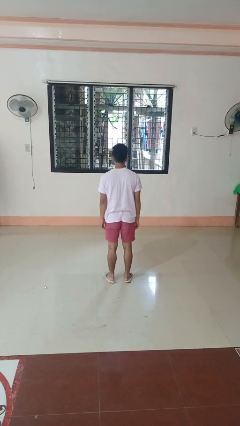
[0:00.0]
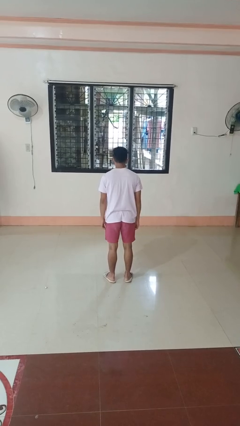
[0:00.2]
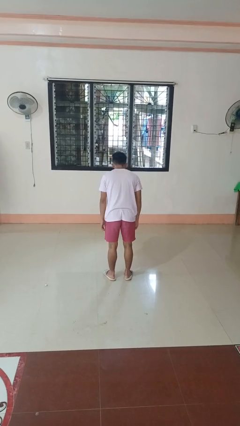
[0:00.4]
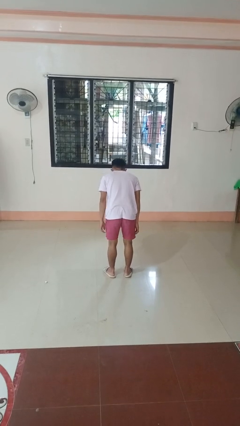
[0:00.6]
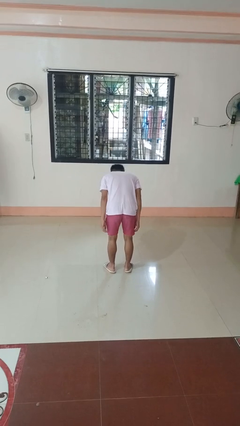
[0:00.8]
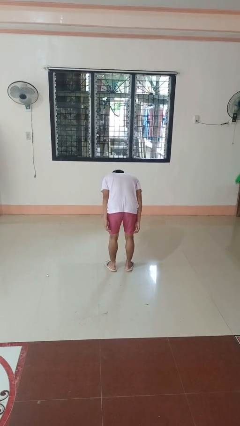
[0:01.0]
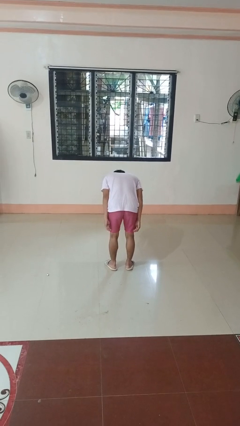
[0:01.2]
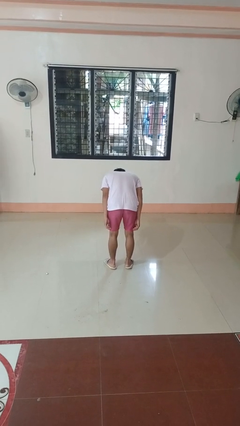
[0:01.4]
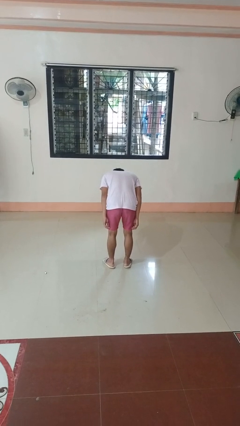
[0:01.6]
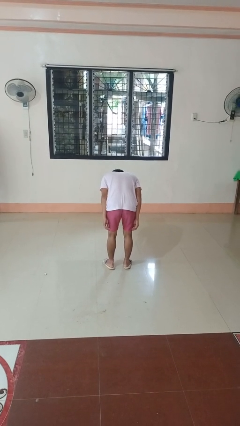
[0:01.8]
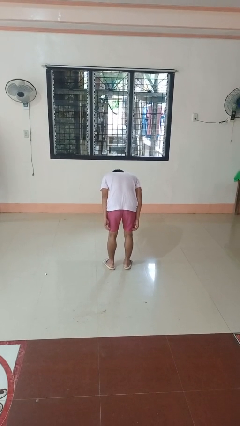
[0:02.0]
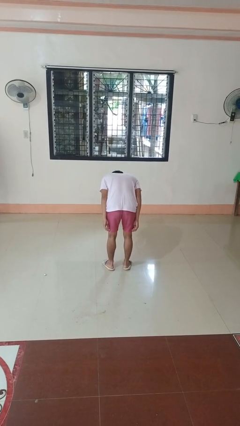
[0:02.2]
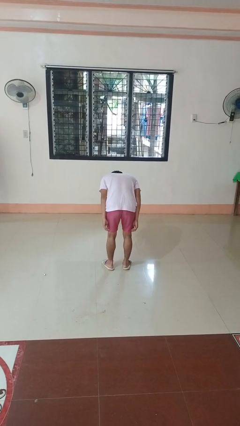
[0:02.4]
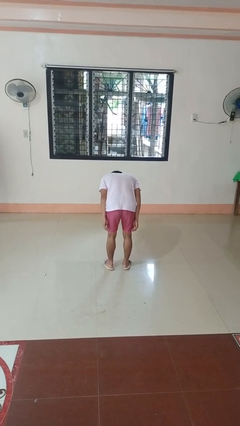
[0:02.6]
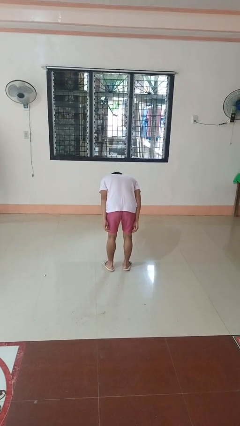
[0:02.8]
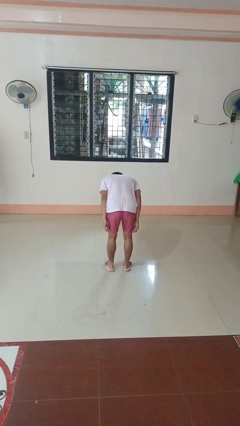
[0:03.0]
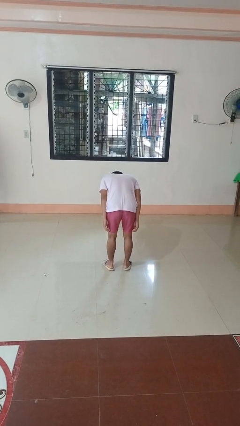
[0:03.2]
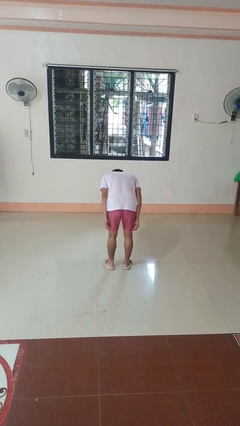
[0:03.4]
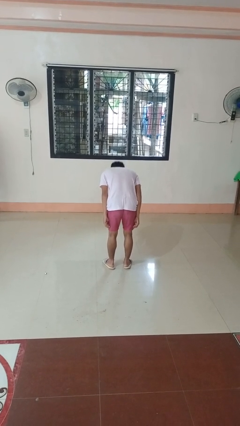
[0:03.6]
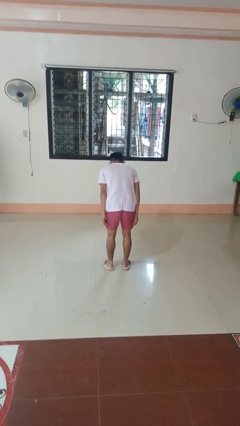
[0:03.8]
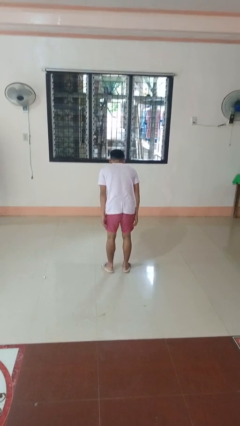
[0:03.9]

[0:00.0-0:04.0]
person bows

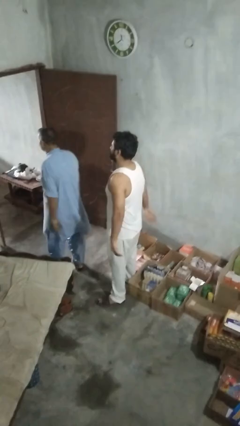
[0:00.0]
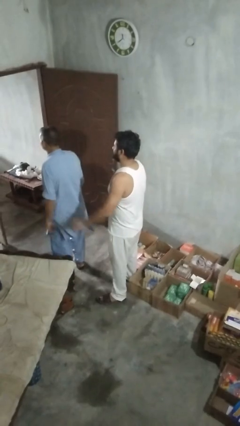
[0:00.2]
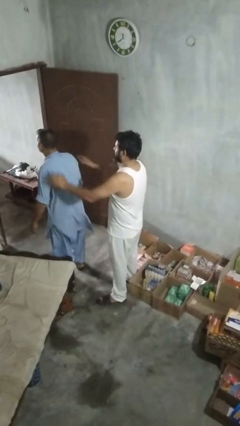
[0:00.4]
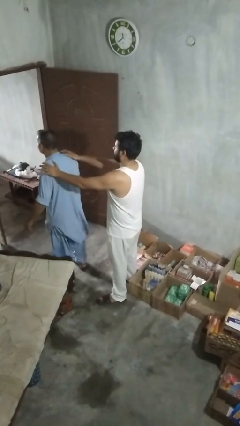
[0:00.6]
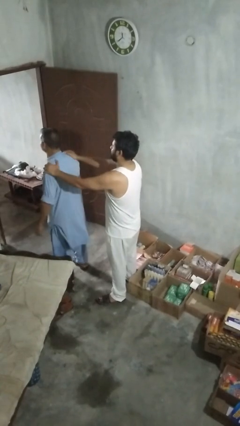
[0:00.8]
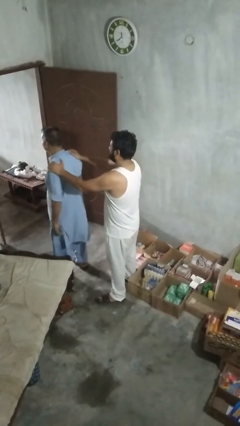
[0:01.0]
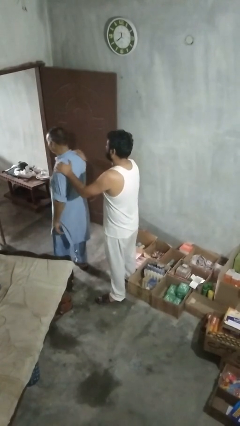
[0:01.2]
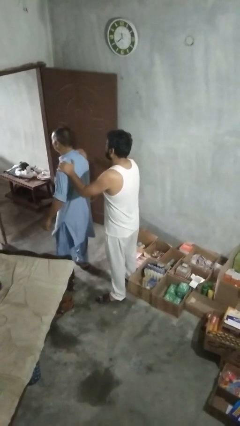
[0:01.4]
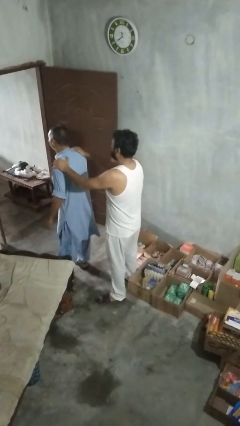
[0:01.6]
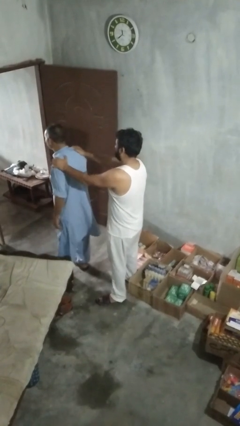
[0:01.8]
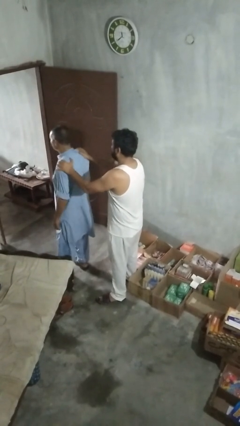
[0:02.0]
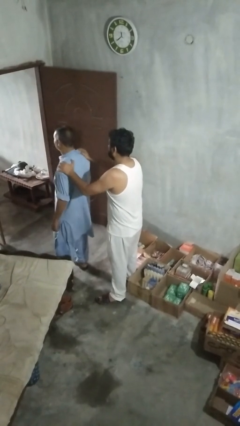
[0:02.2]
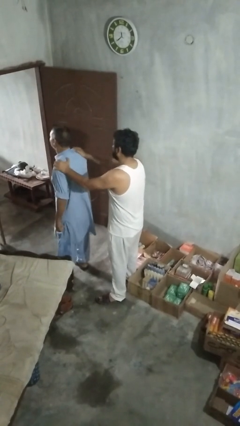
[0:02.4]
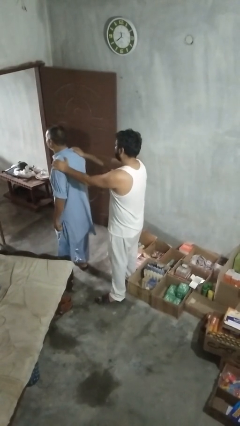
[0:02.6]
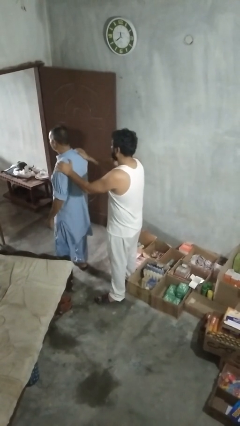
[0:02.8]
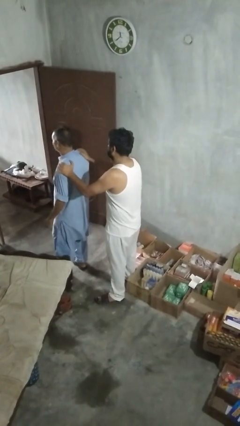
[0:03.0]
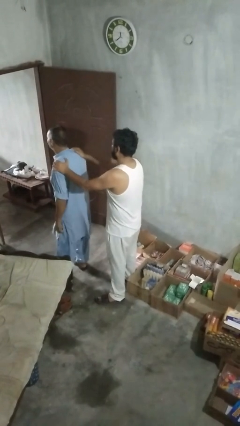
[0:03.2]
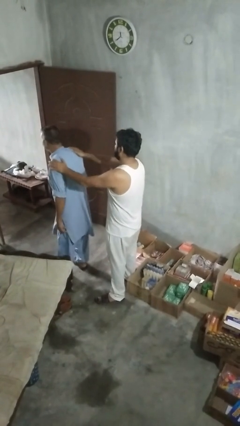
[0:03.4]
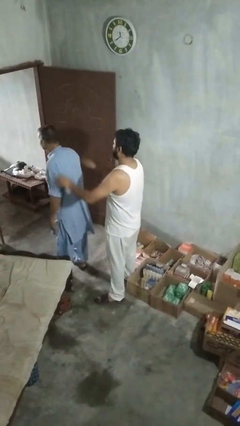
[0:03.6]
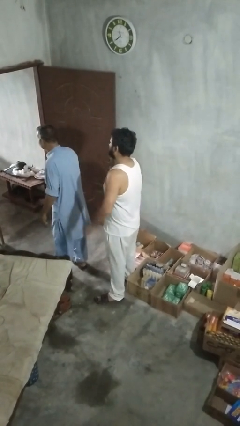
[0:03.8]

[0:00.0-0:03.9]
person pounds shoulders of person

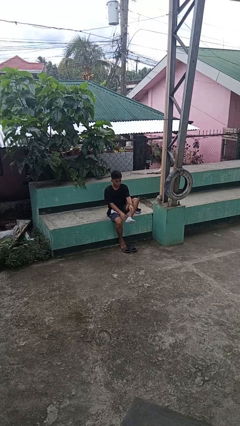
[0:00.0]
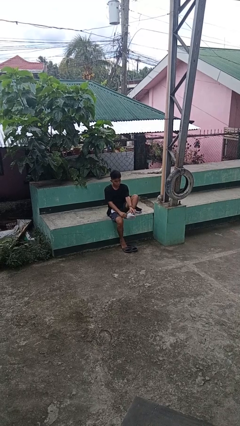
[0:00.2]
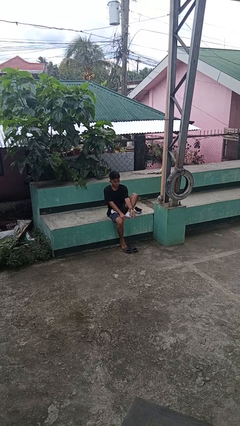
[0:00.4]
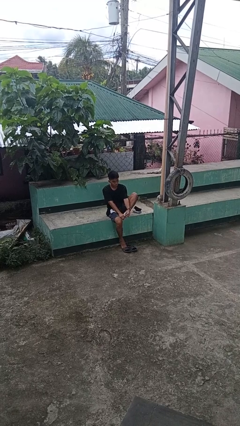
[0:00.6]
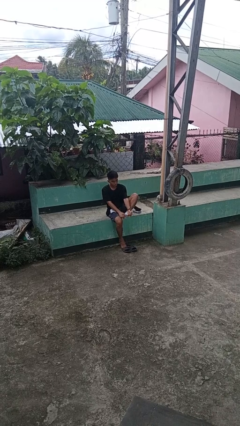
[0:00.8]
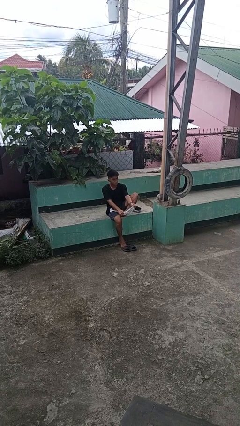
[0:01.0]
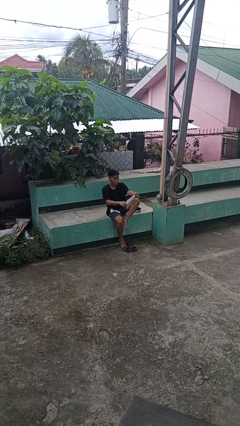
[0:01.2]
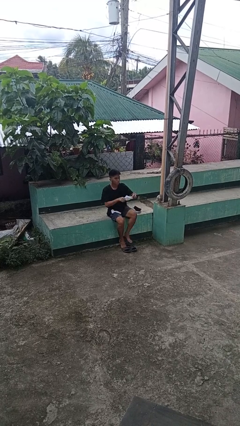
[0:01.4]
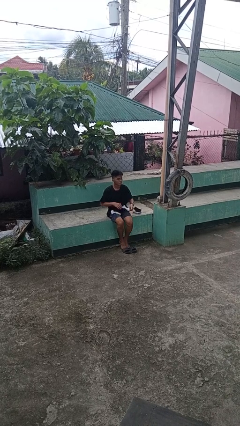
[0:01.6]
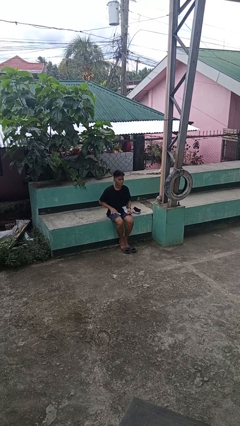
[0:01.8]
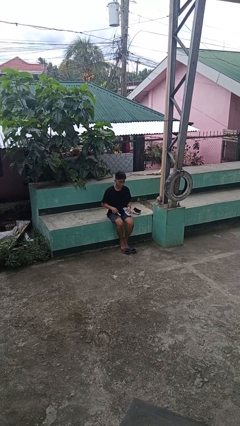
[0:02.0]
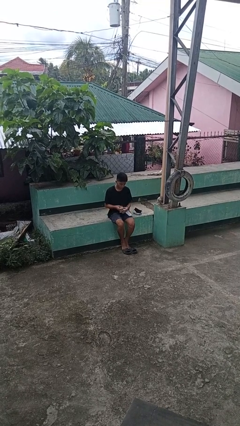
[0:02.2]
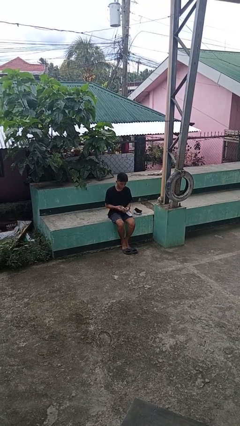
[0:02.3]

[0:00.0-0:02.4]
person takes off socks

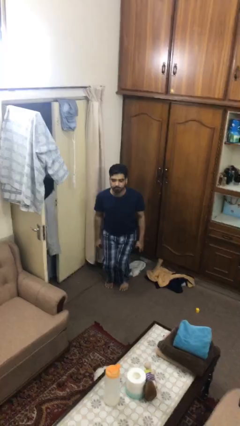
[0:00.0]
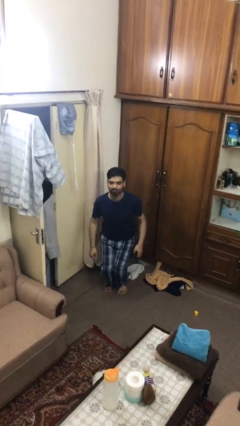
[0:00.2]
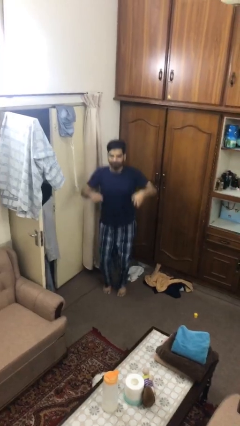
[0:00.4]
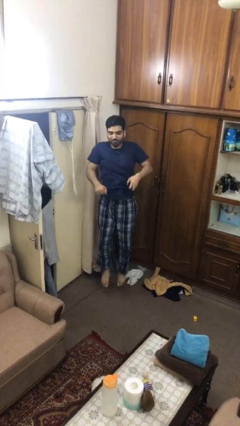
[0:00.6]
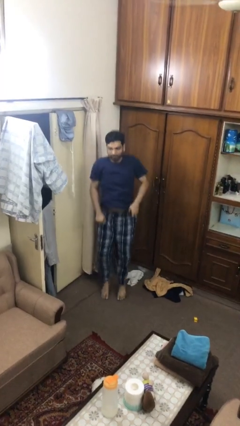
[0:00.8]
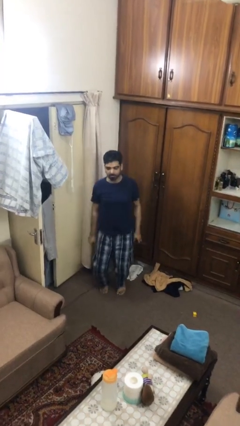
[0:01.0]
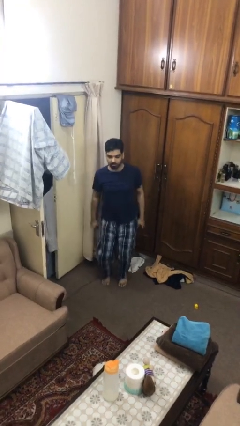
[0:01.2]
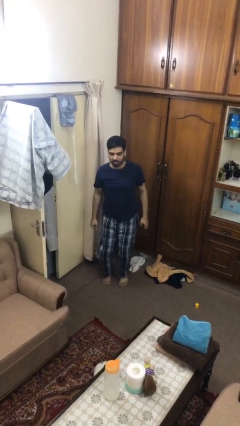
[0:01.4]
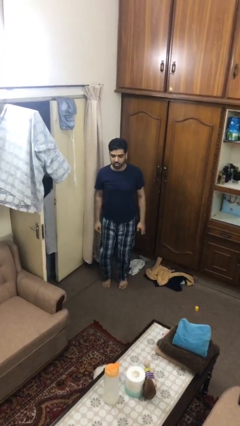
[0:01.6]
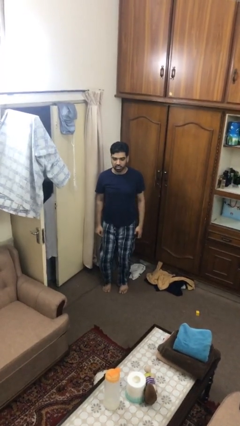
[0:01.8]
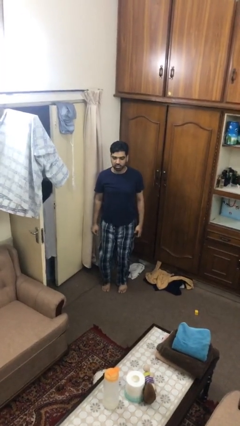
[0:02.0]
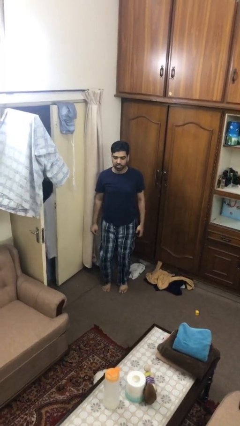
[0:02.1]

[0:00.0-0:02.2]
person jumps

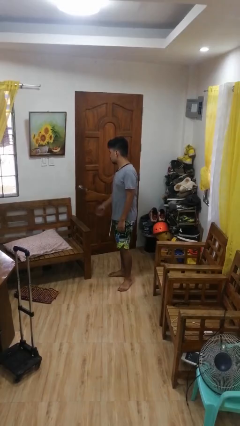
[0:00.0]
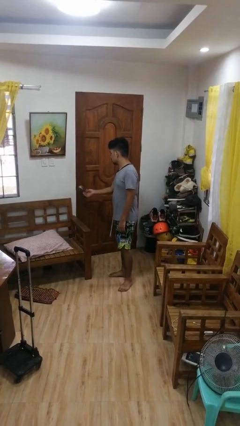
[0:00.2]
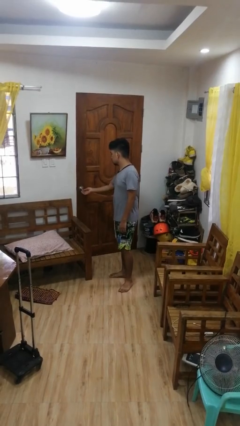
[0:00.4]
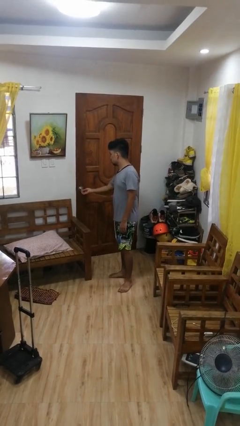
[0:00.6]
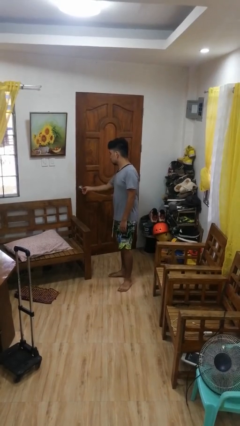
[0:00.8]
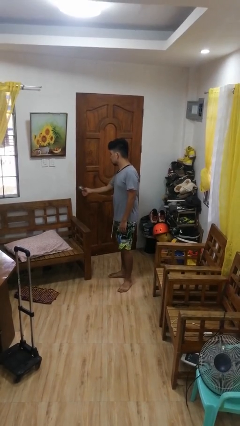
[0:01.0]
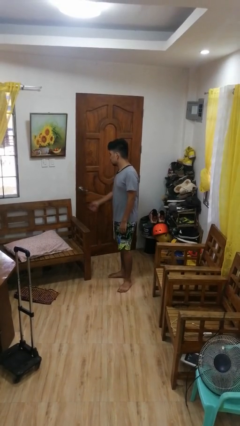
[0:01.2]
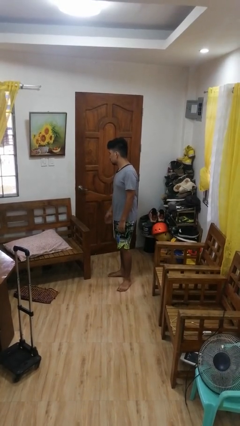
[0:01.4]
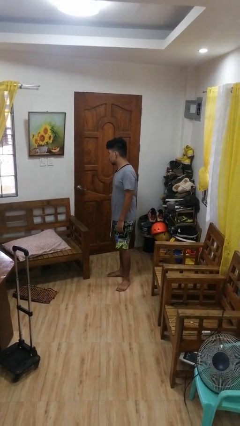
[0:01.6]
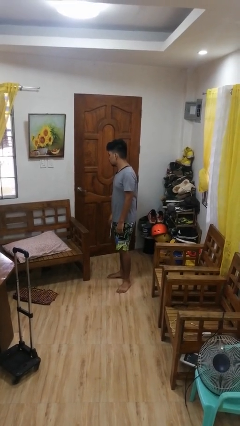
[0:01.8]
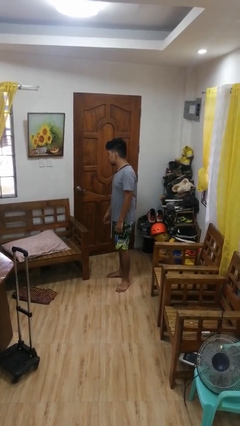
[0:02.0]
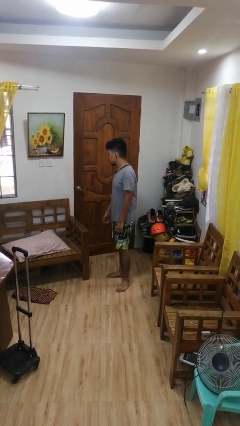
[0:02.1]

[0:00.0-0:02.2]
person locks door with keys

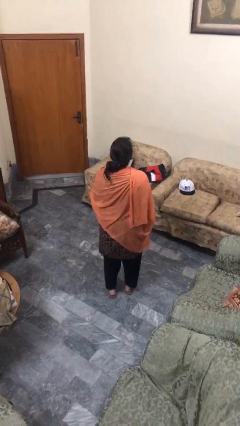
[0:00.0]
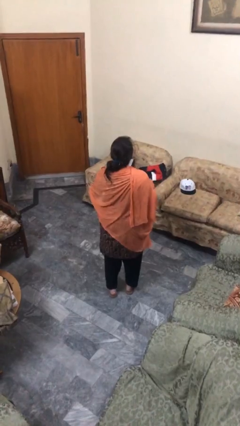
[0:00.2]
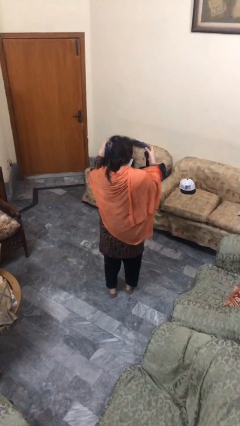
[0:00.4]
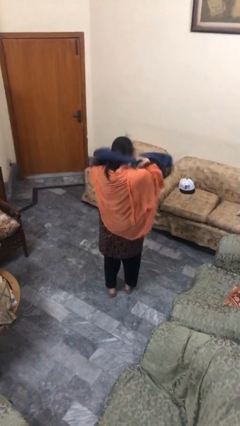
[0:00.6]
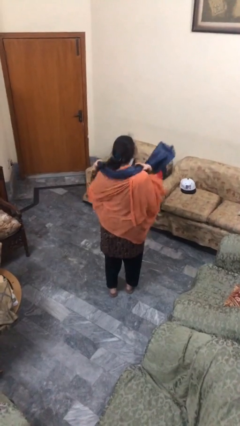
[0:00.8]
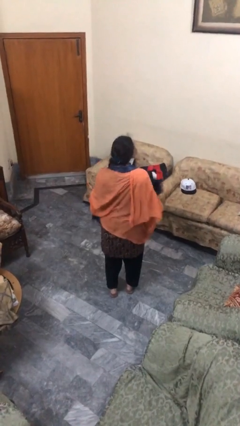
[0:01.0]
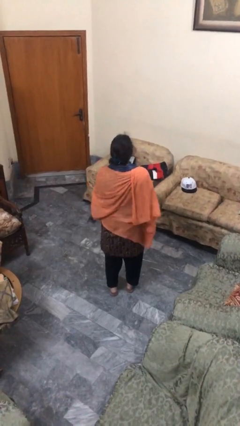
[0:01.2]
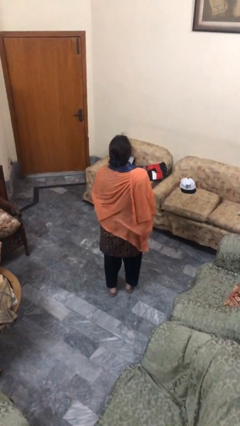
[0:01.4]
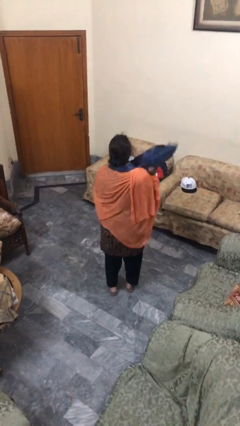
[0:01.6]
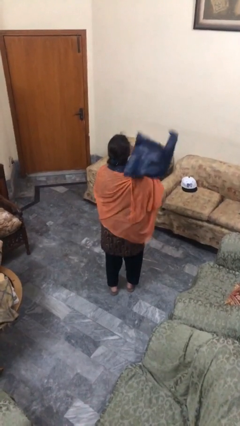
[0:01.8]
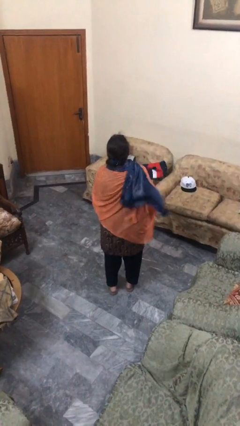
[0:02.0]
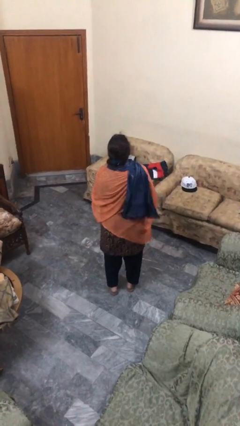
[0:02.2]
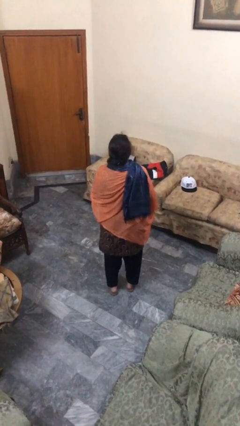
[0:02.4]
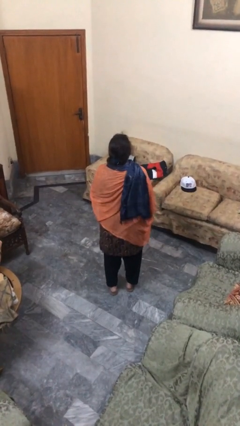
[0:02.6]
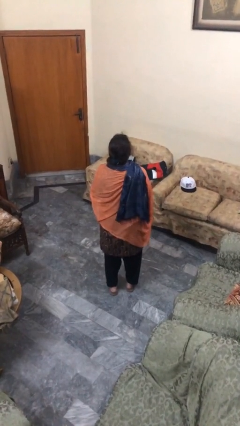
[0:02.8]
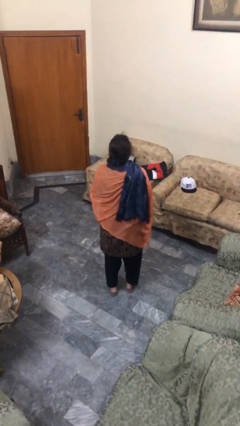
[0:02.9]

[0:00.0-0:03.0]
person puts on scarf
